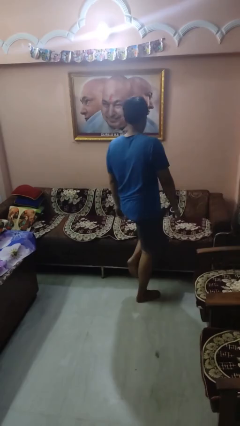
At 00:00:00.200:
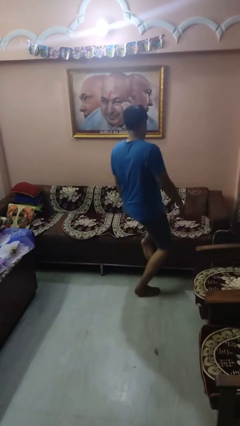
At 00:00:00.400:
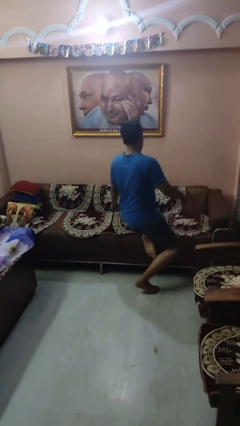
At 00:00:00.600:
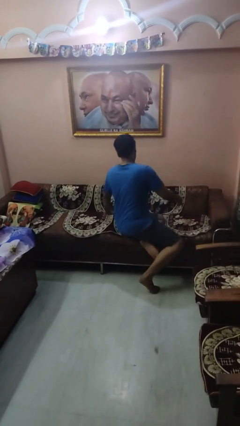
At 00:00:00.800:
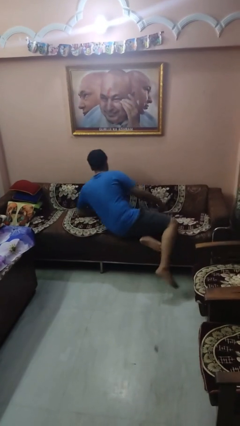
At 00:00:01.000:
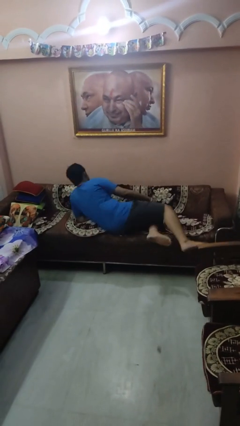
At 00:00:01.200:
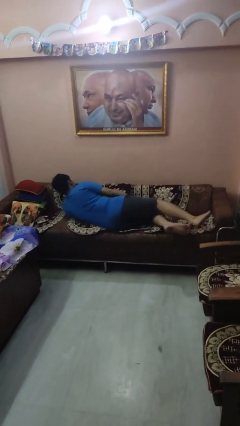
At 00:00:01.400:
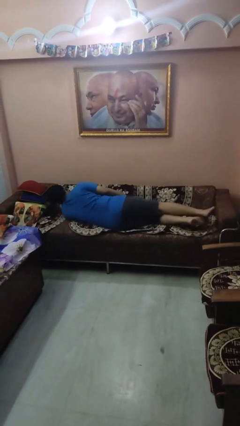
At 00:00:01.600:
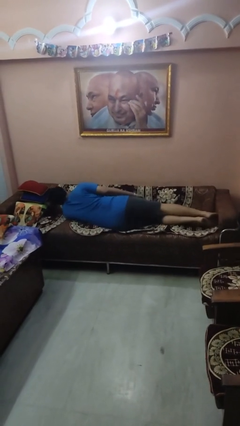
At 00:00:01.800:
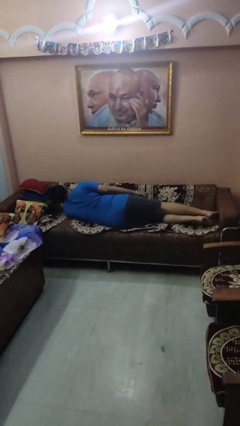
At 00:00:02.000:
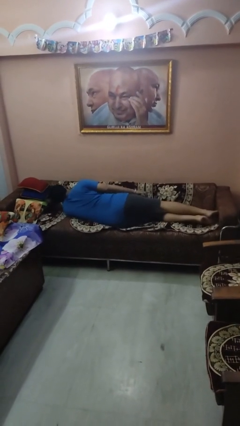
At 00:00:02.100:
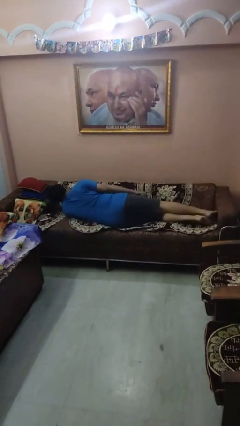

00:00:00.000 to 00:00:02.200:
person lies down on couch

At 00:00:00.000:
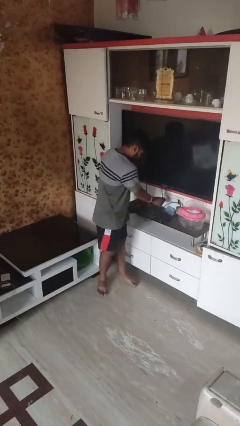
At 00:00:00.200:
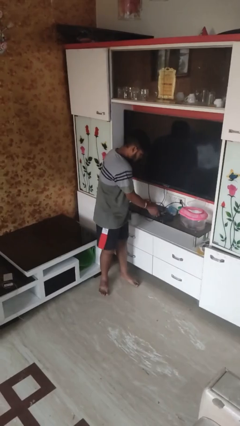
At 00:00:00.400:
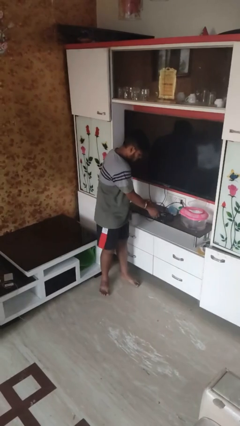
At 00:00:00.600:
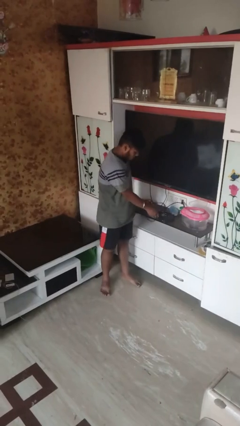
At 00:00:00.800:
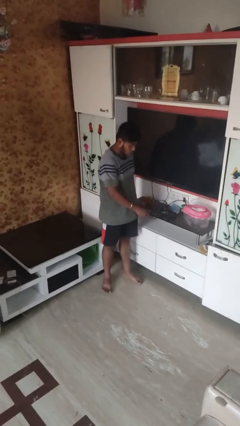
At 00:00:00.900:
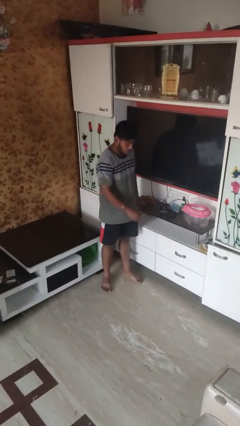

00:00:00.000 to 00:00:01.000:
person unplugs from electrical socket

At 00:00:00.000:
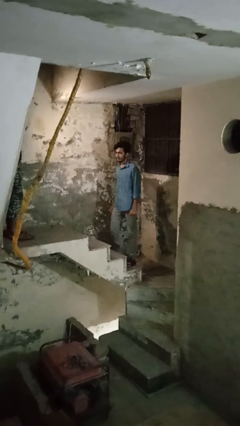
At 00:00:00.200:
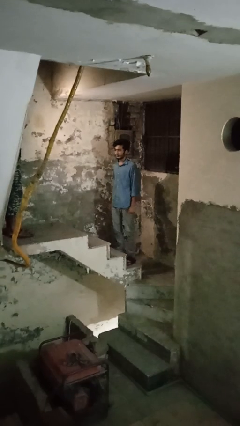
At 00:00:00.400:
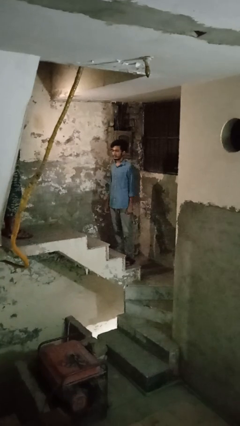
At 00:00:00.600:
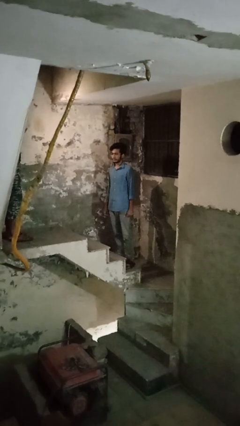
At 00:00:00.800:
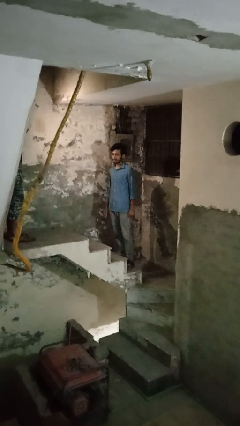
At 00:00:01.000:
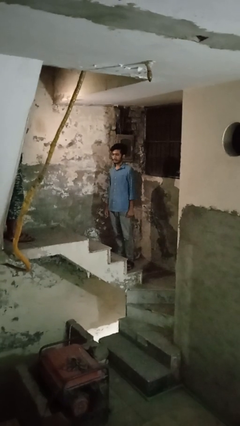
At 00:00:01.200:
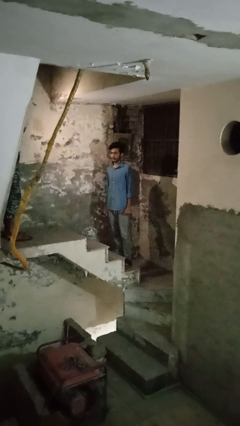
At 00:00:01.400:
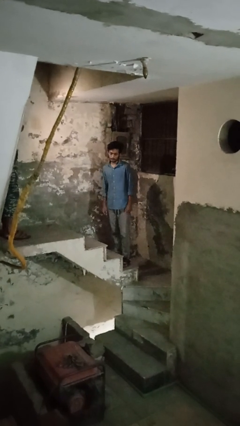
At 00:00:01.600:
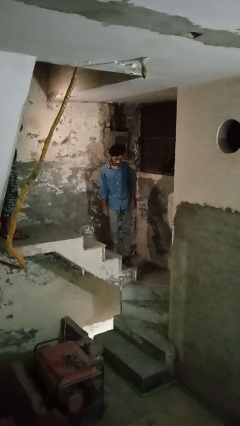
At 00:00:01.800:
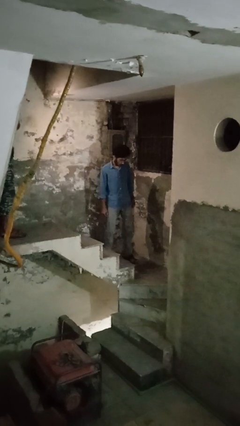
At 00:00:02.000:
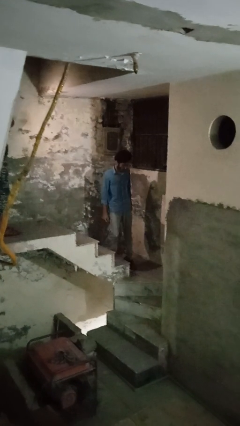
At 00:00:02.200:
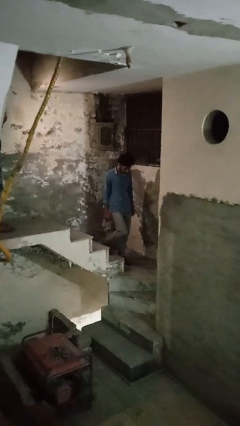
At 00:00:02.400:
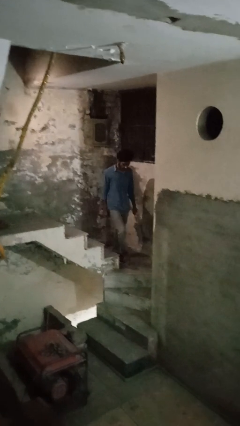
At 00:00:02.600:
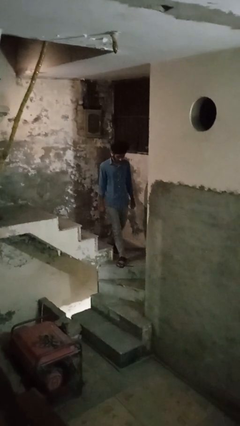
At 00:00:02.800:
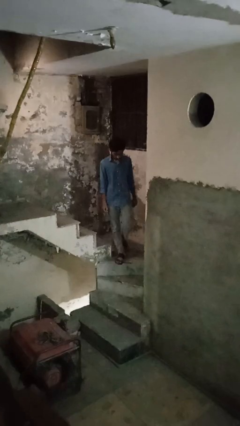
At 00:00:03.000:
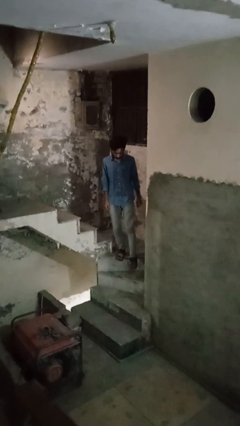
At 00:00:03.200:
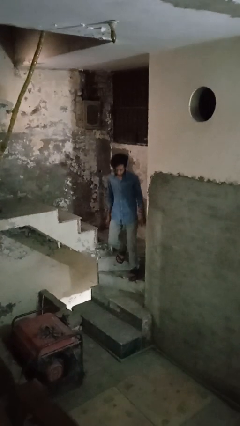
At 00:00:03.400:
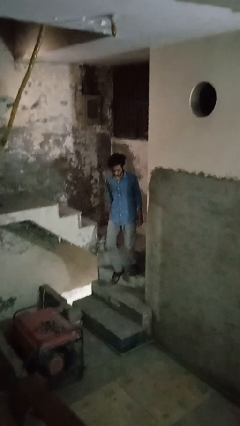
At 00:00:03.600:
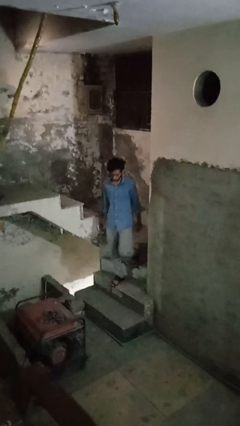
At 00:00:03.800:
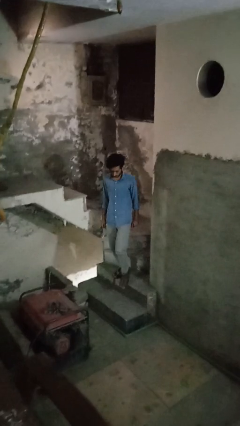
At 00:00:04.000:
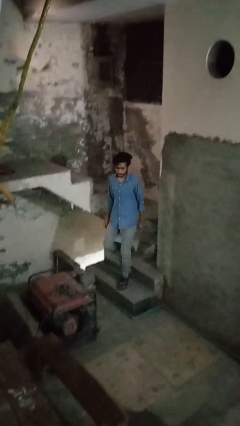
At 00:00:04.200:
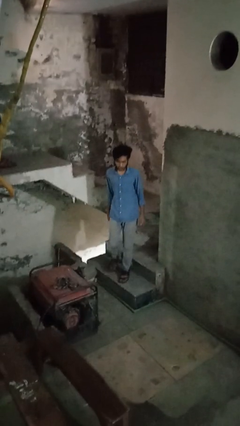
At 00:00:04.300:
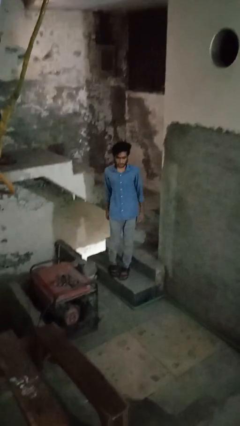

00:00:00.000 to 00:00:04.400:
person climbs down stairs

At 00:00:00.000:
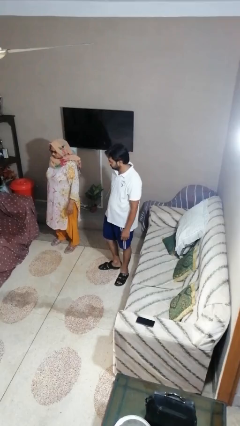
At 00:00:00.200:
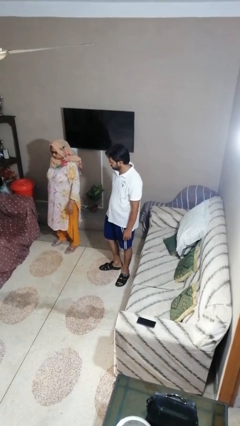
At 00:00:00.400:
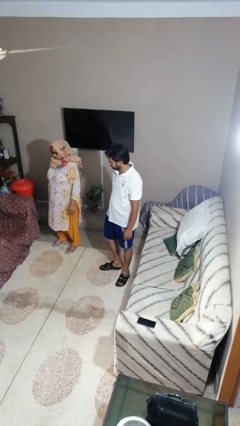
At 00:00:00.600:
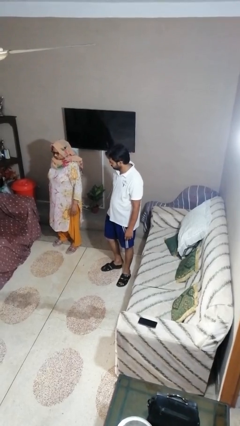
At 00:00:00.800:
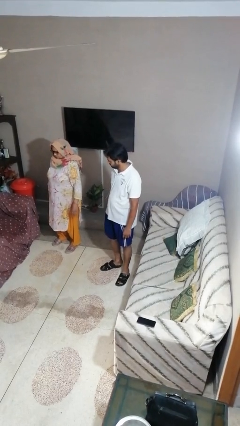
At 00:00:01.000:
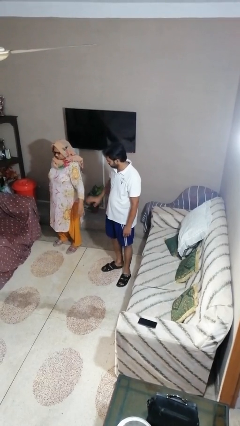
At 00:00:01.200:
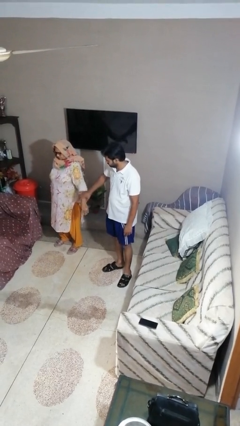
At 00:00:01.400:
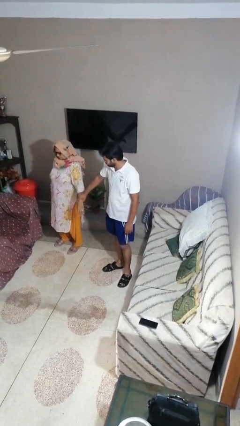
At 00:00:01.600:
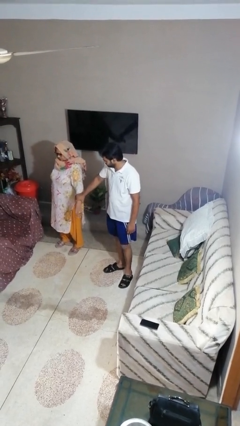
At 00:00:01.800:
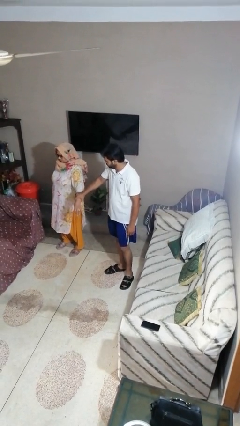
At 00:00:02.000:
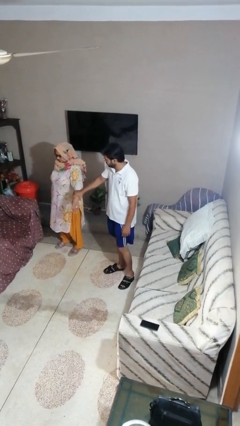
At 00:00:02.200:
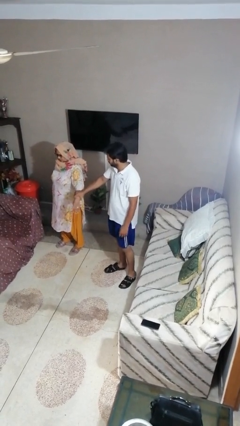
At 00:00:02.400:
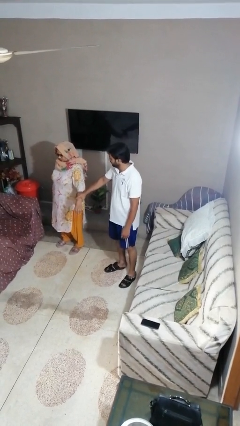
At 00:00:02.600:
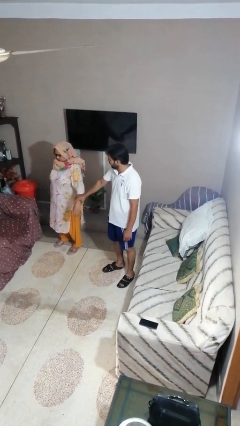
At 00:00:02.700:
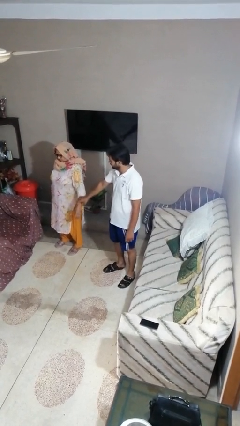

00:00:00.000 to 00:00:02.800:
person grabs person by forearm

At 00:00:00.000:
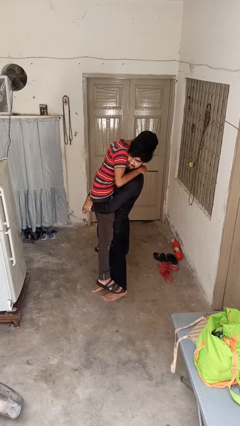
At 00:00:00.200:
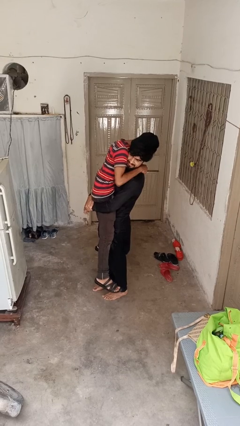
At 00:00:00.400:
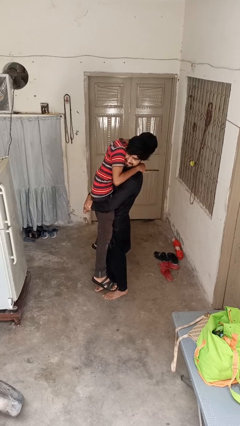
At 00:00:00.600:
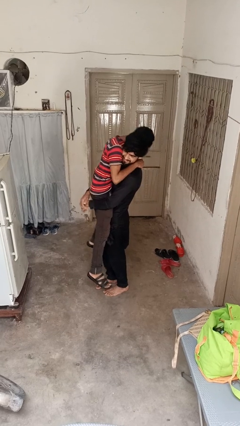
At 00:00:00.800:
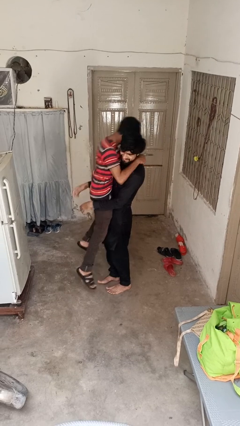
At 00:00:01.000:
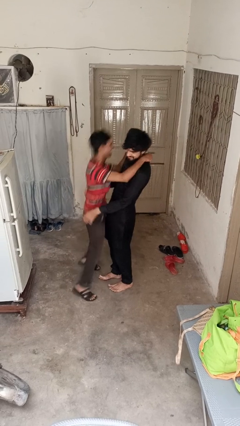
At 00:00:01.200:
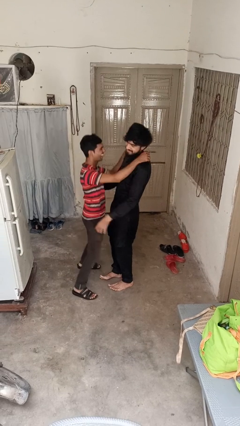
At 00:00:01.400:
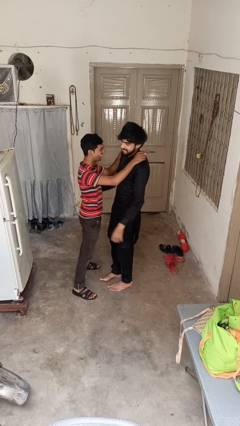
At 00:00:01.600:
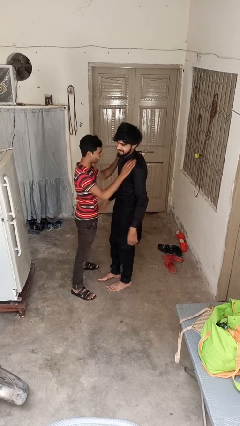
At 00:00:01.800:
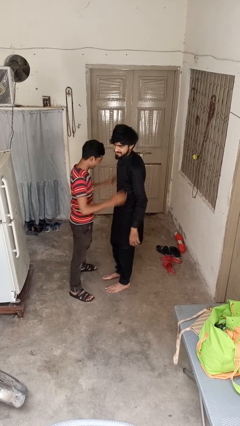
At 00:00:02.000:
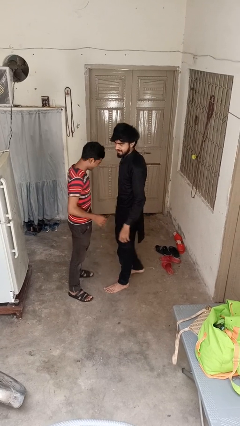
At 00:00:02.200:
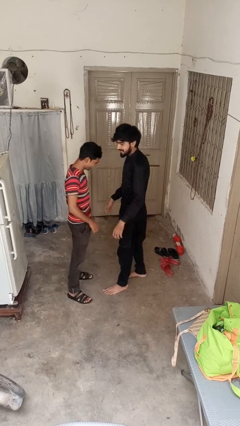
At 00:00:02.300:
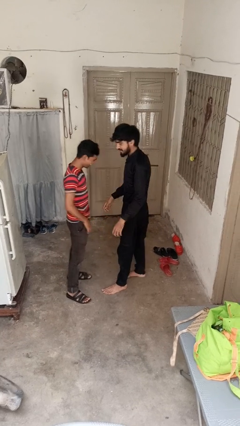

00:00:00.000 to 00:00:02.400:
person puts down person

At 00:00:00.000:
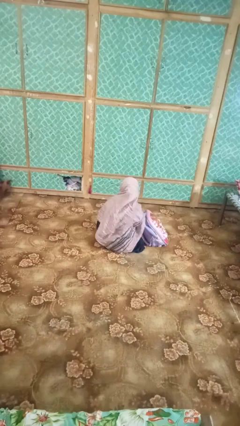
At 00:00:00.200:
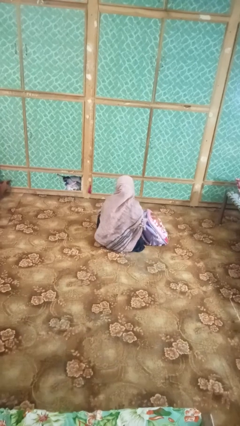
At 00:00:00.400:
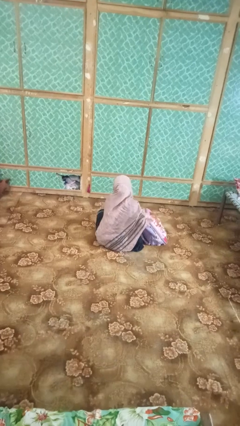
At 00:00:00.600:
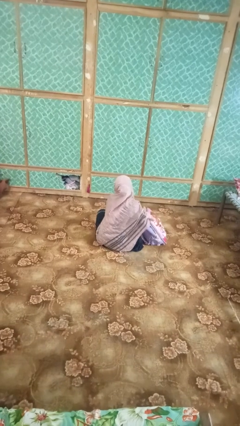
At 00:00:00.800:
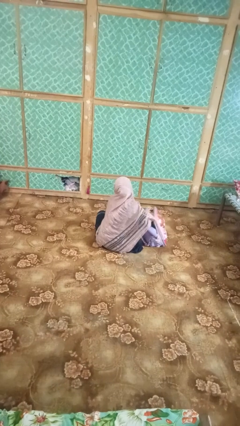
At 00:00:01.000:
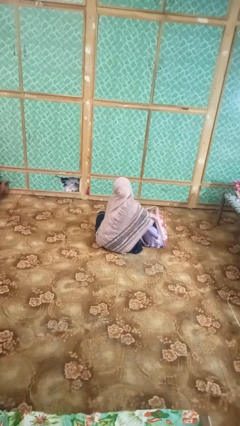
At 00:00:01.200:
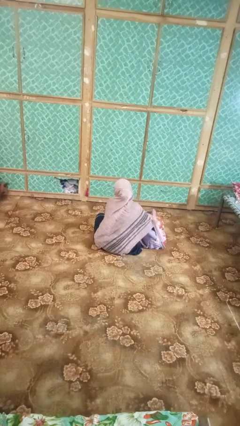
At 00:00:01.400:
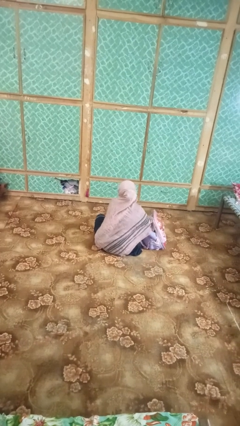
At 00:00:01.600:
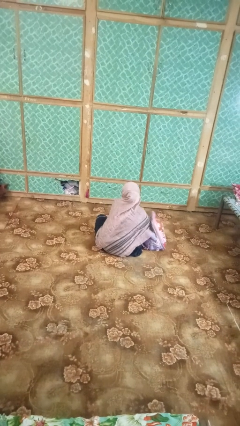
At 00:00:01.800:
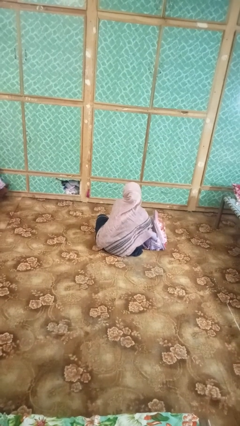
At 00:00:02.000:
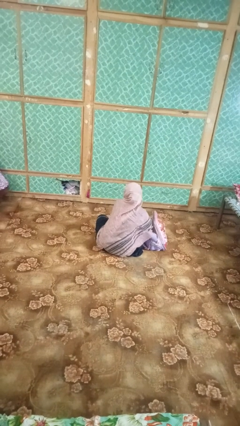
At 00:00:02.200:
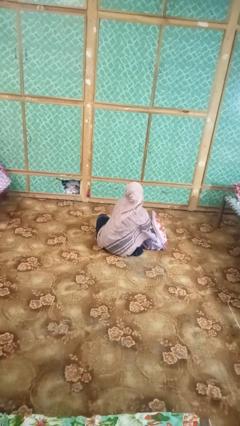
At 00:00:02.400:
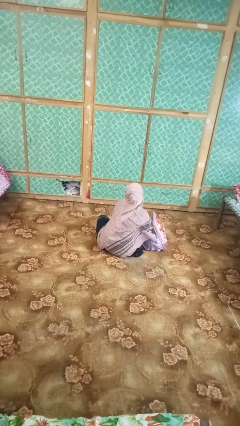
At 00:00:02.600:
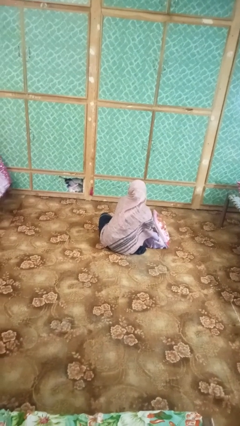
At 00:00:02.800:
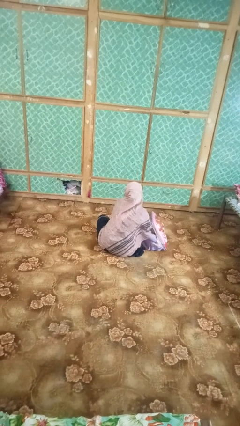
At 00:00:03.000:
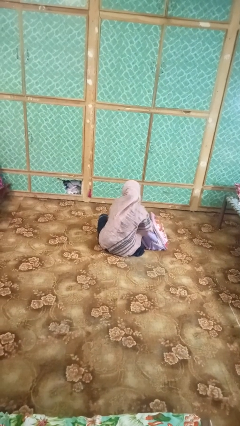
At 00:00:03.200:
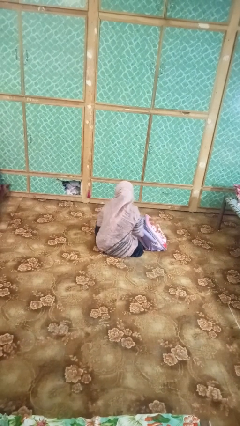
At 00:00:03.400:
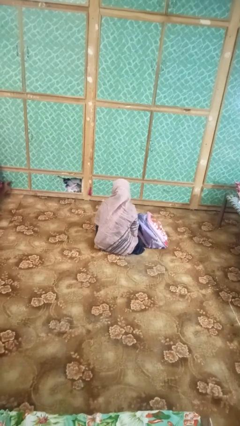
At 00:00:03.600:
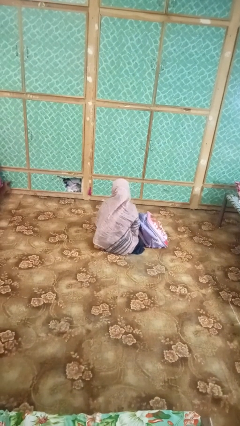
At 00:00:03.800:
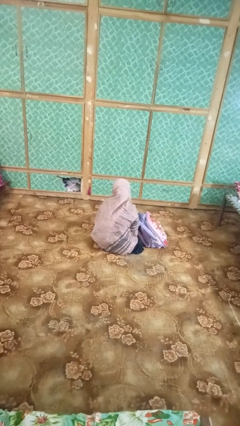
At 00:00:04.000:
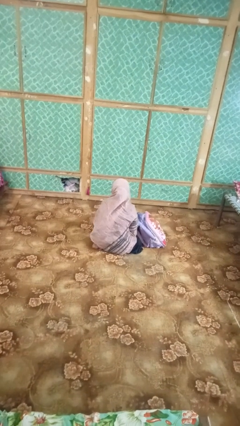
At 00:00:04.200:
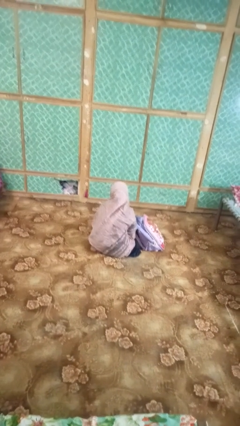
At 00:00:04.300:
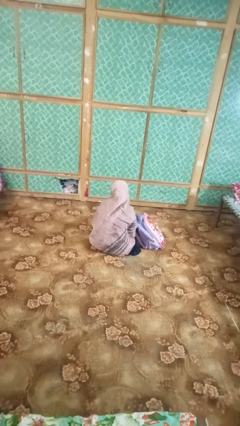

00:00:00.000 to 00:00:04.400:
person searches in bag
